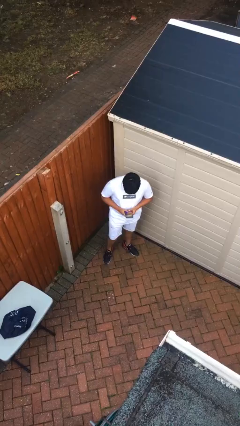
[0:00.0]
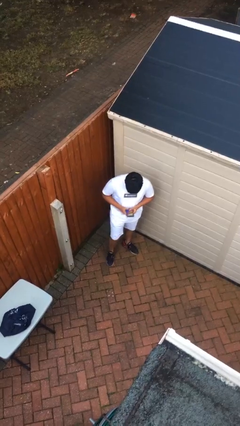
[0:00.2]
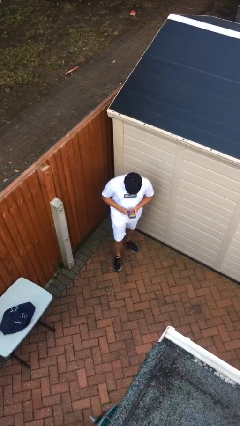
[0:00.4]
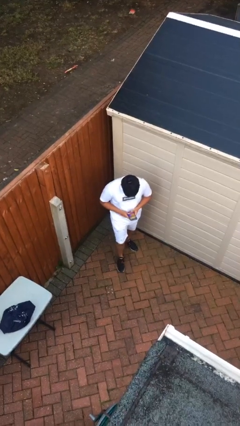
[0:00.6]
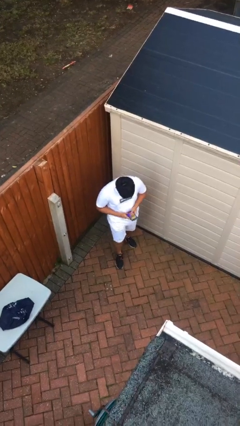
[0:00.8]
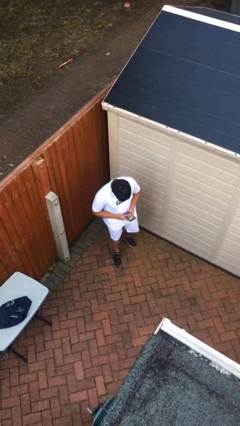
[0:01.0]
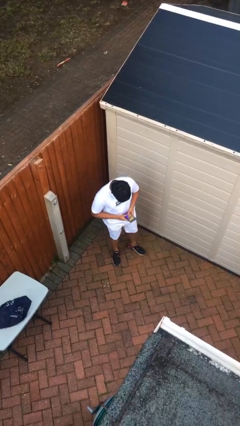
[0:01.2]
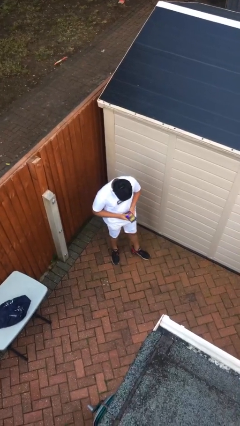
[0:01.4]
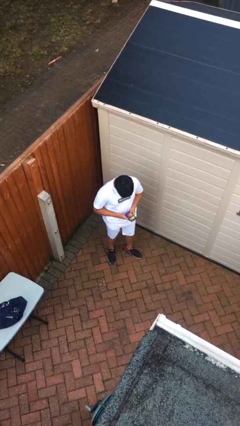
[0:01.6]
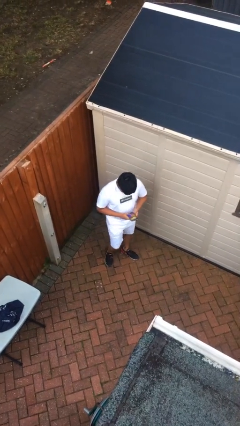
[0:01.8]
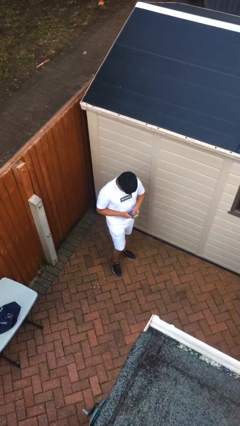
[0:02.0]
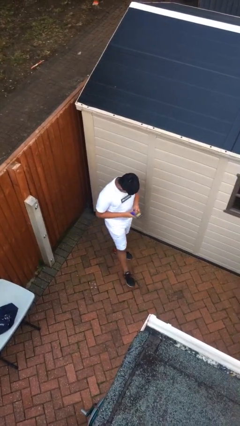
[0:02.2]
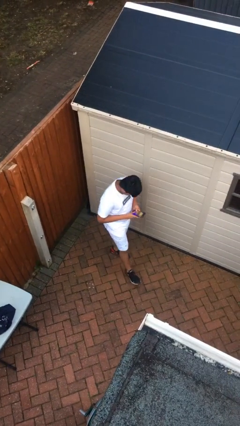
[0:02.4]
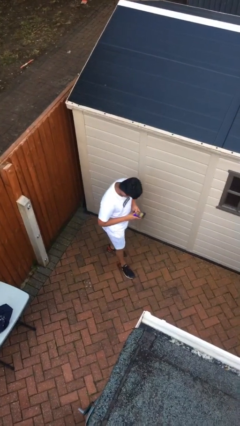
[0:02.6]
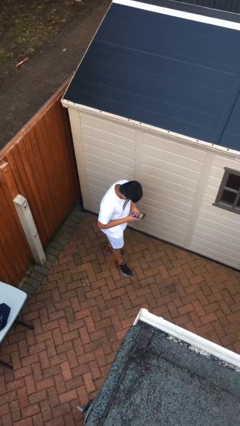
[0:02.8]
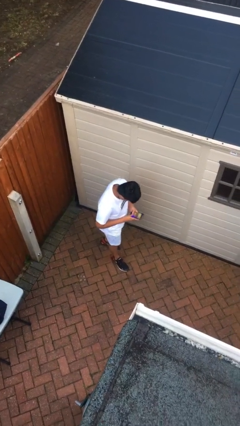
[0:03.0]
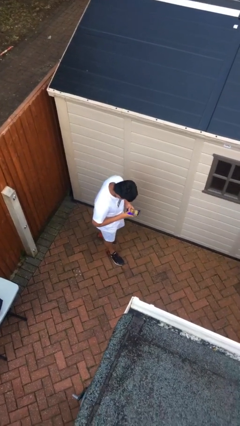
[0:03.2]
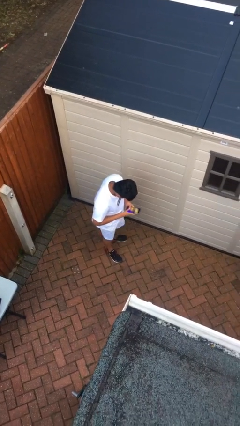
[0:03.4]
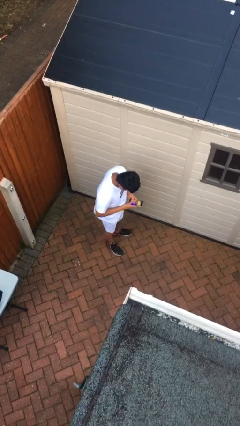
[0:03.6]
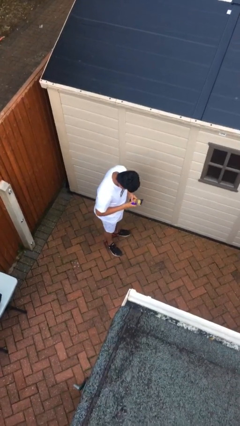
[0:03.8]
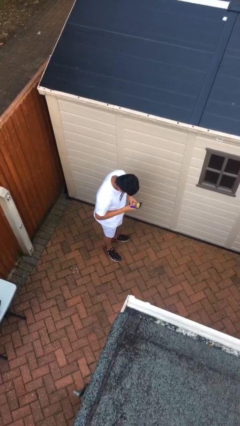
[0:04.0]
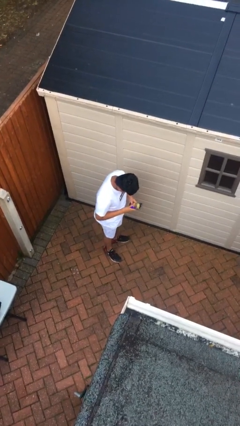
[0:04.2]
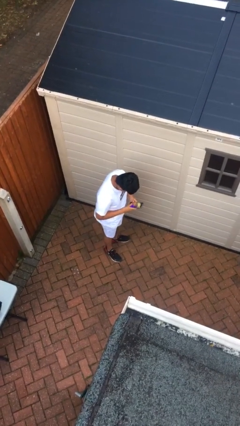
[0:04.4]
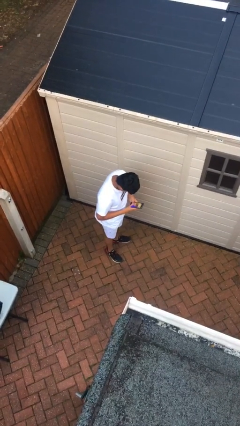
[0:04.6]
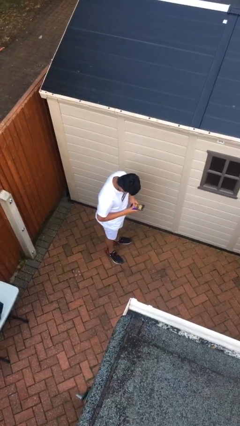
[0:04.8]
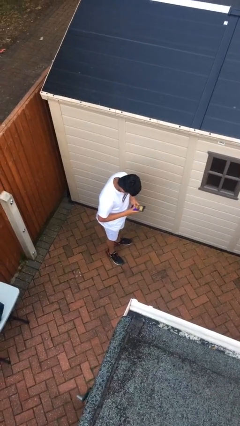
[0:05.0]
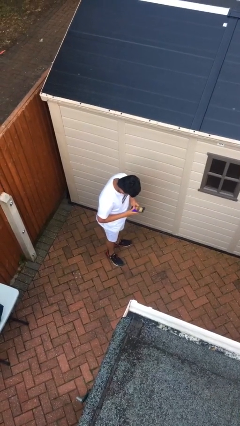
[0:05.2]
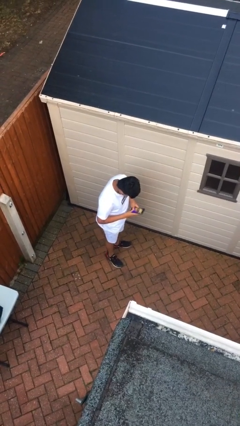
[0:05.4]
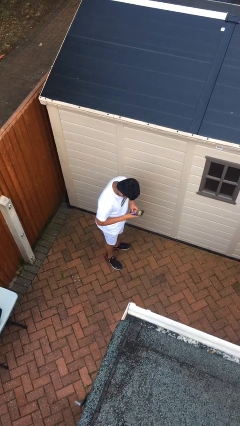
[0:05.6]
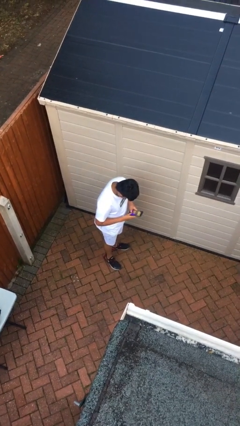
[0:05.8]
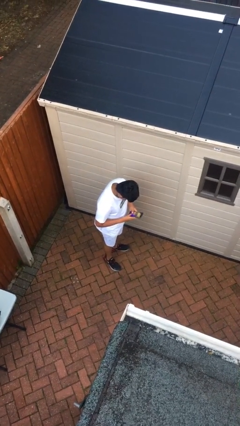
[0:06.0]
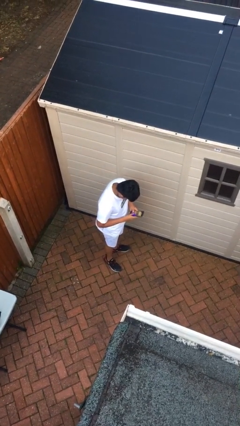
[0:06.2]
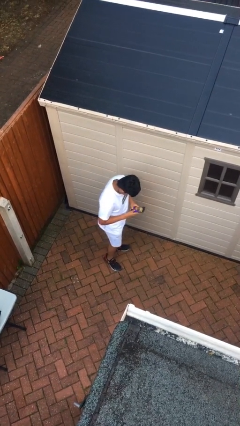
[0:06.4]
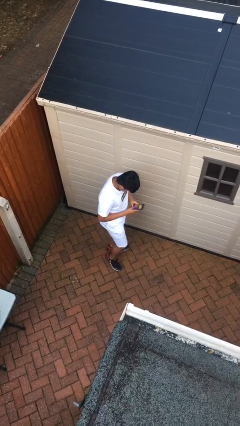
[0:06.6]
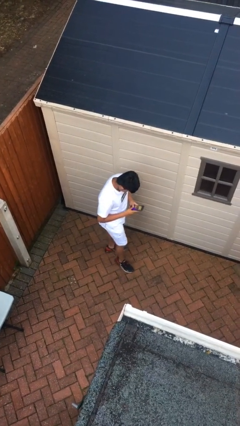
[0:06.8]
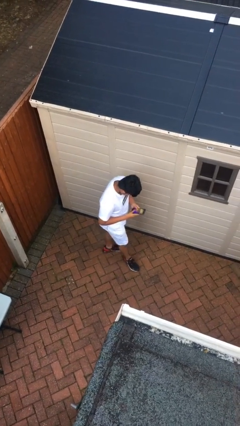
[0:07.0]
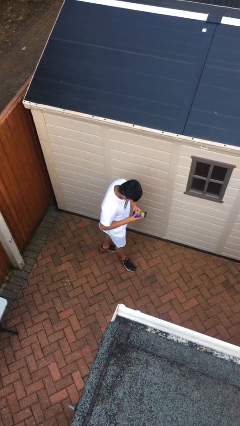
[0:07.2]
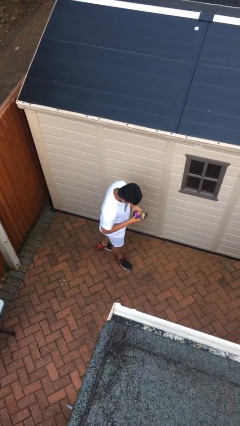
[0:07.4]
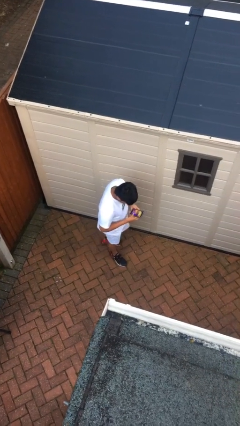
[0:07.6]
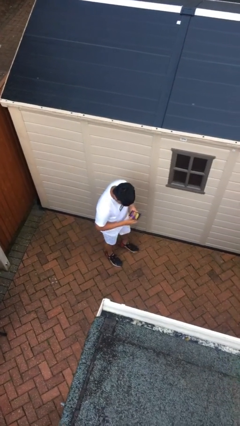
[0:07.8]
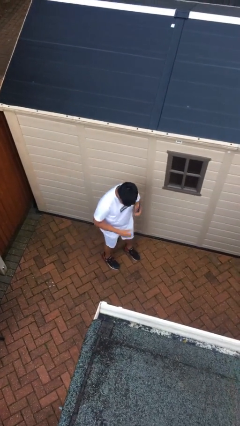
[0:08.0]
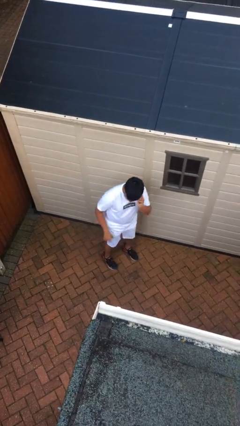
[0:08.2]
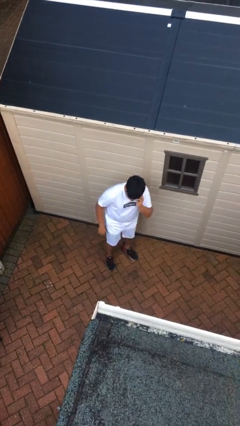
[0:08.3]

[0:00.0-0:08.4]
person texts on phone

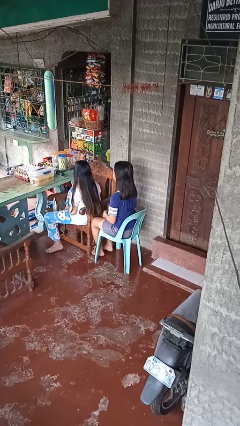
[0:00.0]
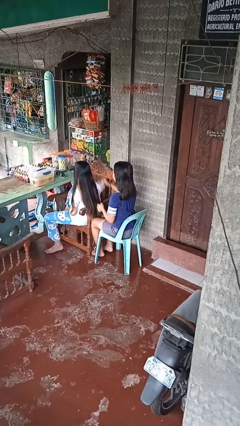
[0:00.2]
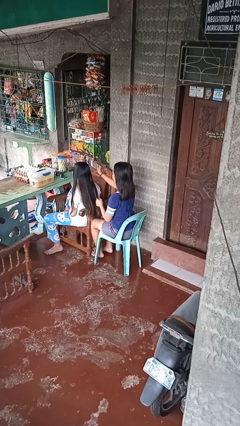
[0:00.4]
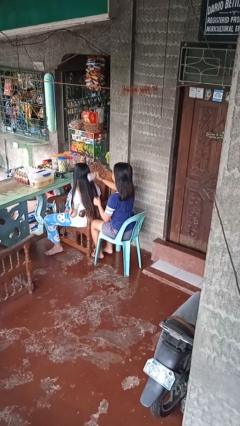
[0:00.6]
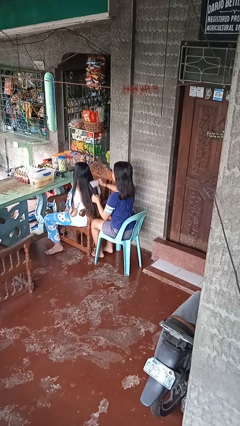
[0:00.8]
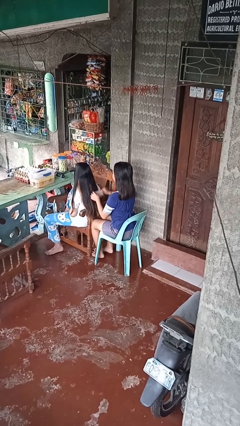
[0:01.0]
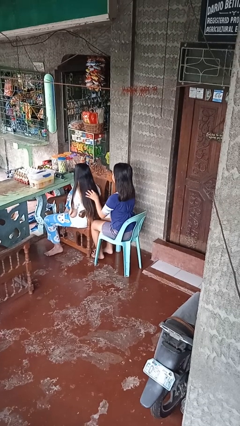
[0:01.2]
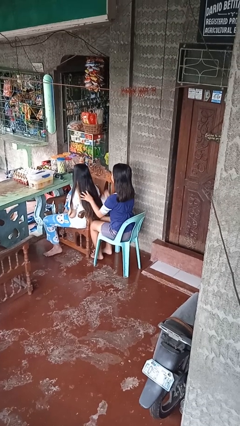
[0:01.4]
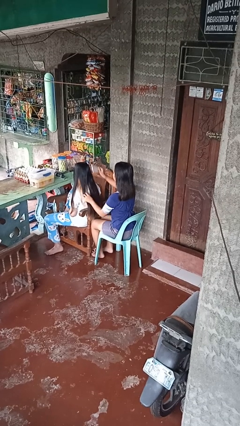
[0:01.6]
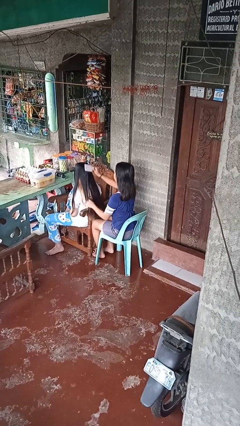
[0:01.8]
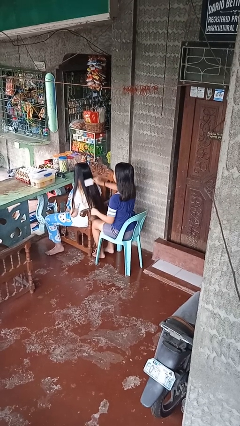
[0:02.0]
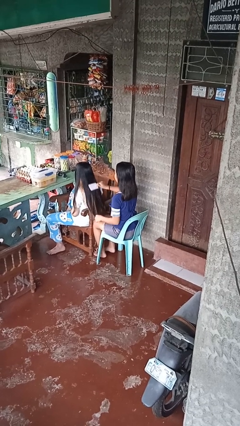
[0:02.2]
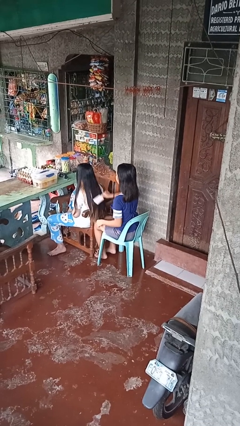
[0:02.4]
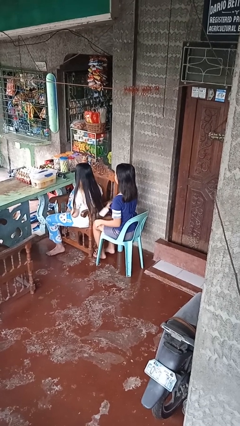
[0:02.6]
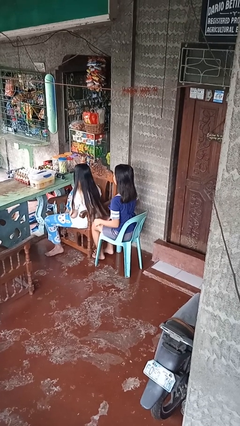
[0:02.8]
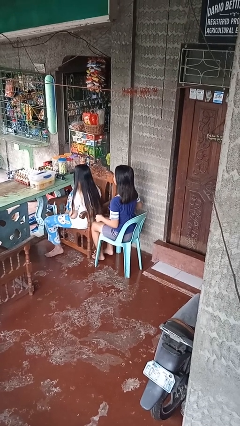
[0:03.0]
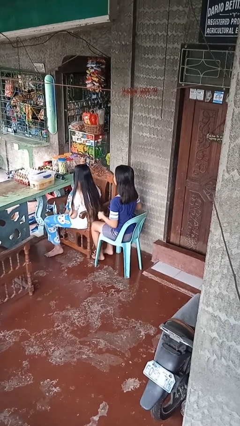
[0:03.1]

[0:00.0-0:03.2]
person brushes hair of person

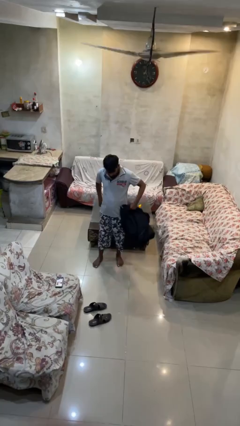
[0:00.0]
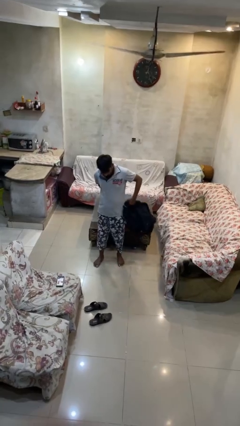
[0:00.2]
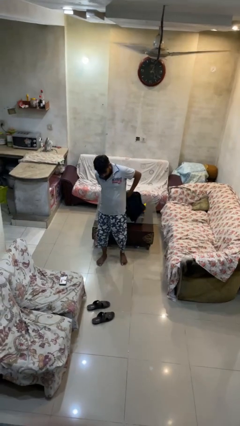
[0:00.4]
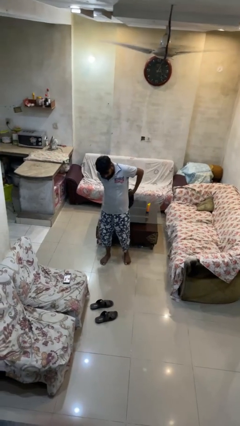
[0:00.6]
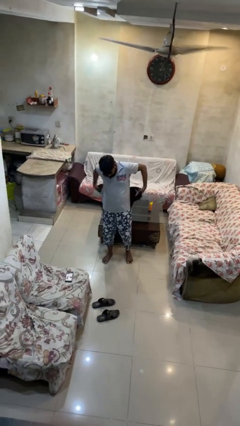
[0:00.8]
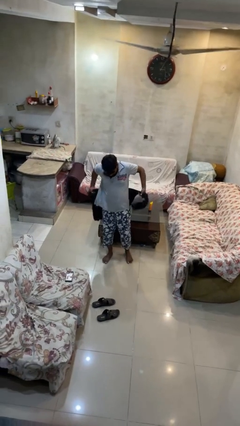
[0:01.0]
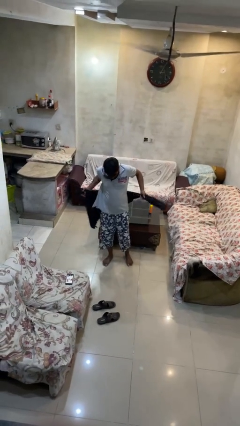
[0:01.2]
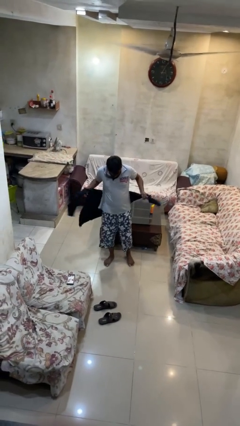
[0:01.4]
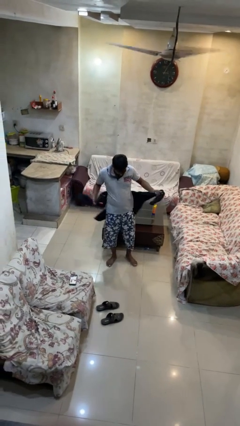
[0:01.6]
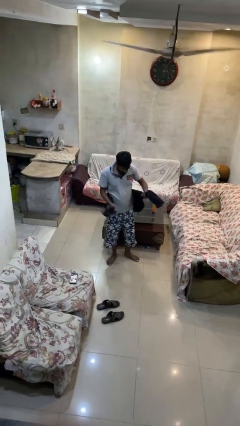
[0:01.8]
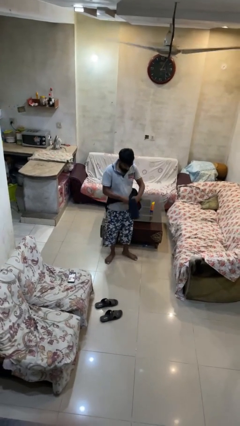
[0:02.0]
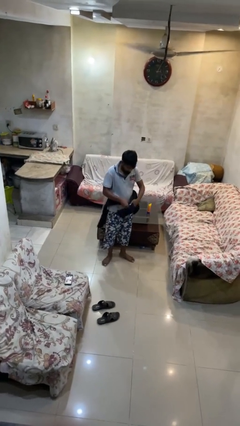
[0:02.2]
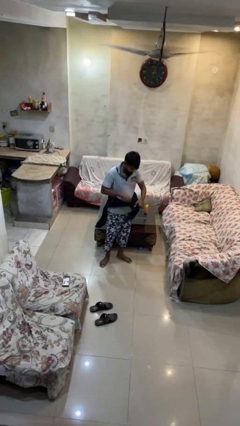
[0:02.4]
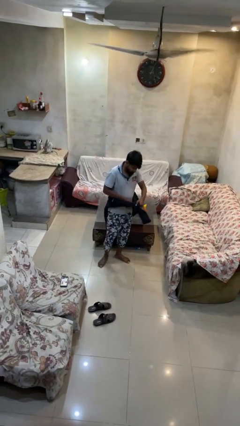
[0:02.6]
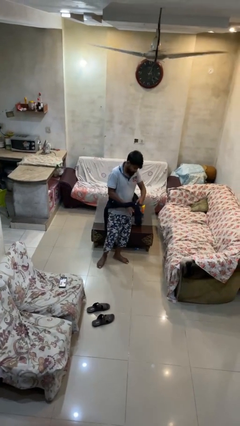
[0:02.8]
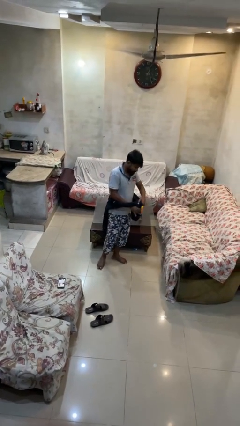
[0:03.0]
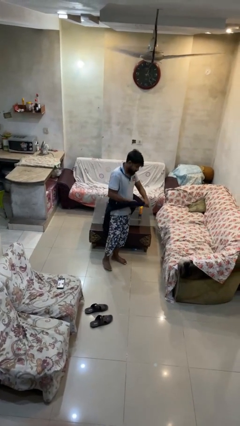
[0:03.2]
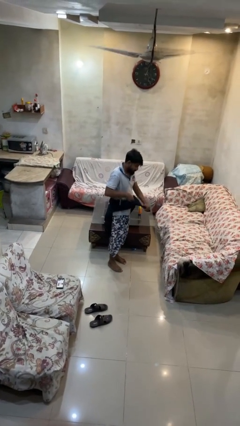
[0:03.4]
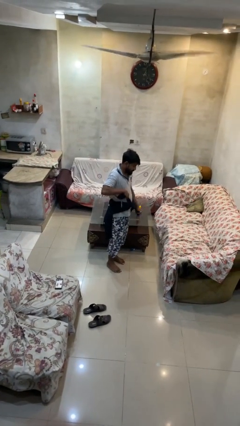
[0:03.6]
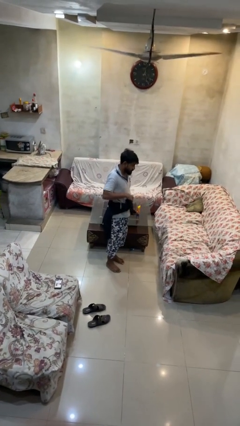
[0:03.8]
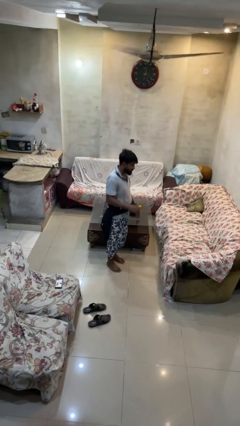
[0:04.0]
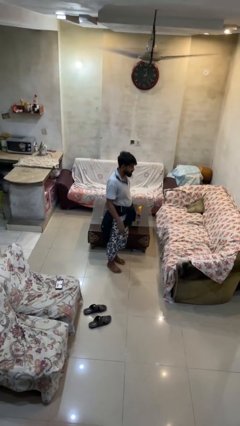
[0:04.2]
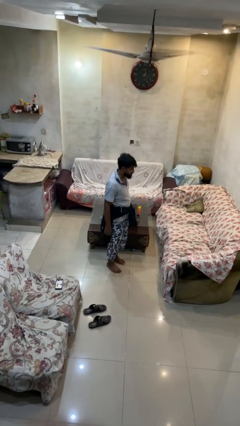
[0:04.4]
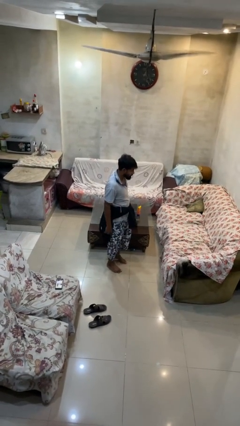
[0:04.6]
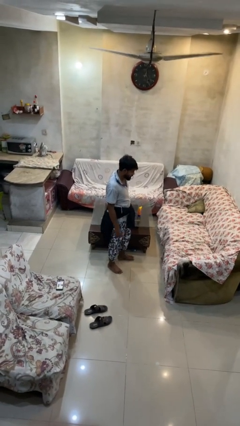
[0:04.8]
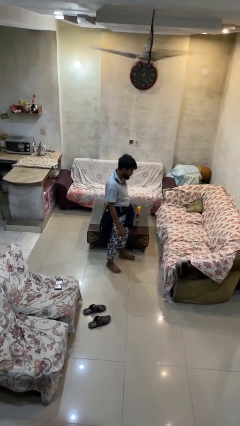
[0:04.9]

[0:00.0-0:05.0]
person ties jacket around waist

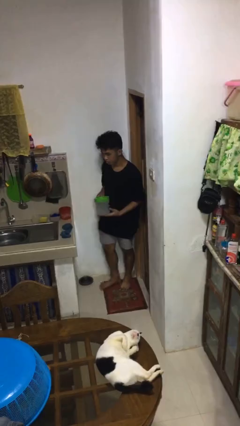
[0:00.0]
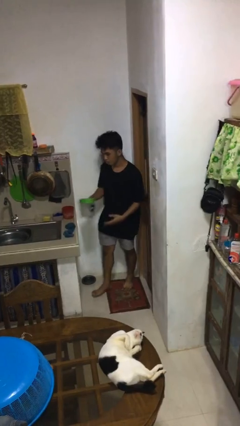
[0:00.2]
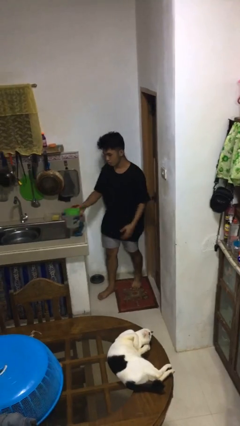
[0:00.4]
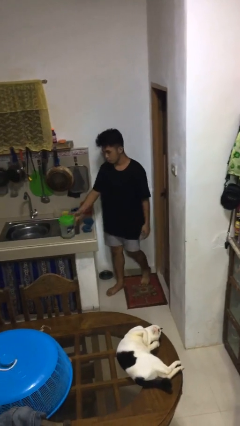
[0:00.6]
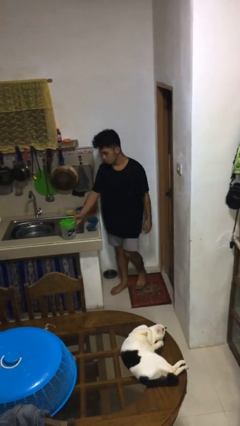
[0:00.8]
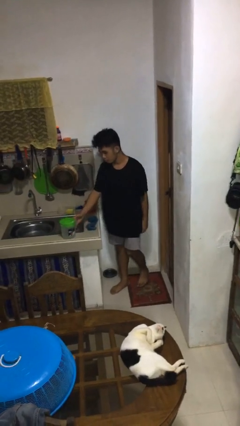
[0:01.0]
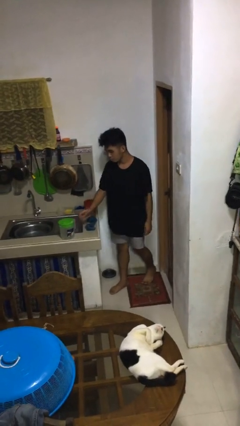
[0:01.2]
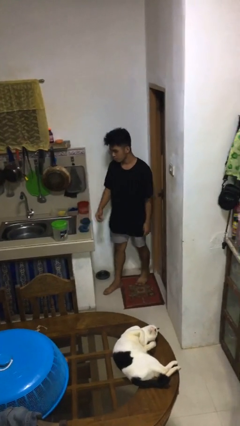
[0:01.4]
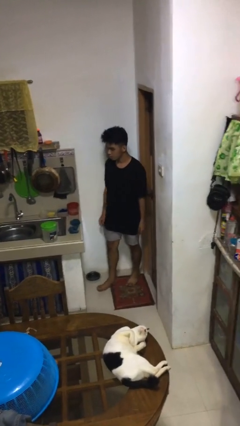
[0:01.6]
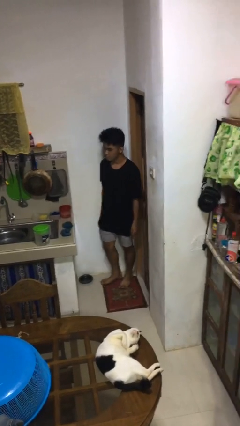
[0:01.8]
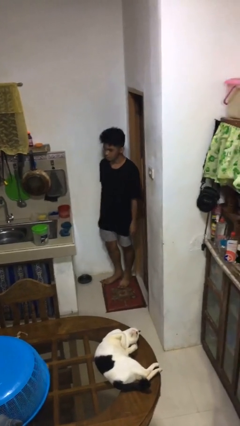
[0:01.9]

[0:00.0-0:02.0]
person puts down object on countertop
